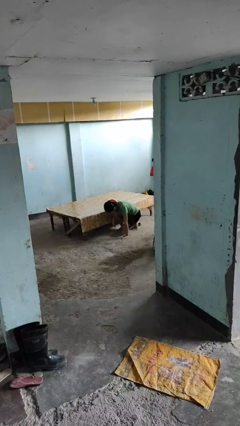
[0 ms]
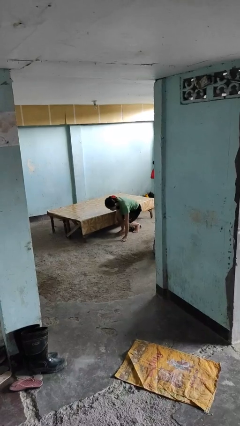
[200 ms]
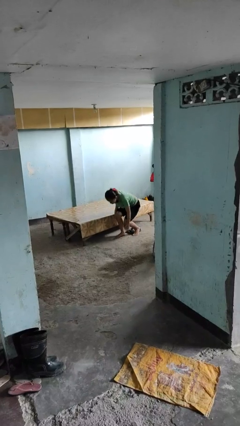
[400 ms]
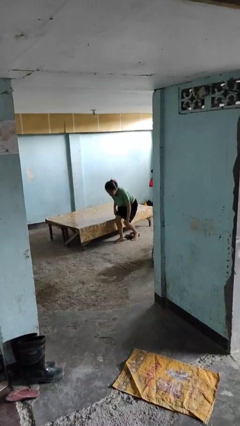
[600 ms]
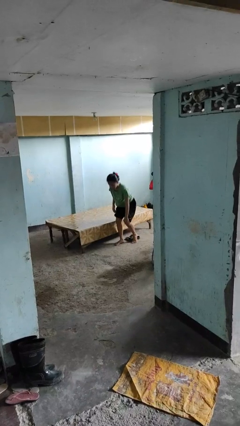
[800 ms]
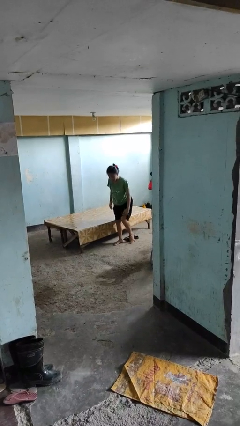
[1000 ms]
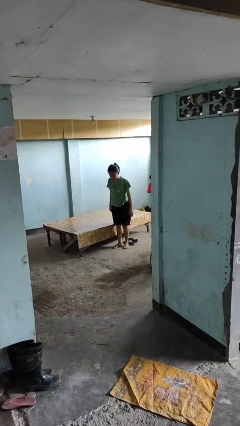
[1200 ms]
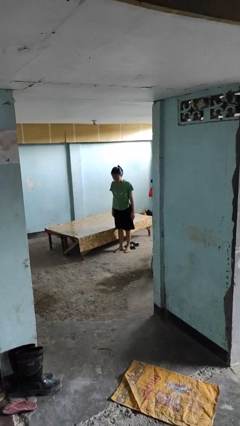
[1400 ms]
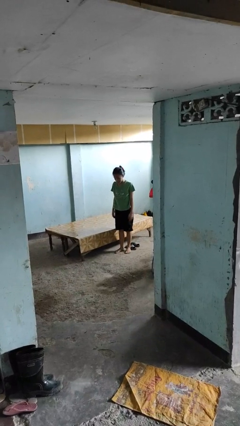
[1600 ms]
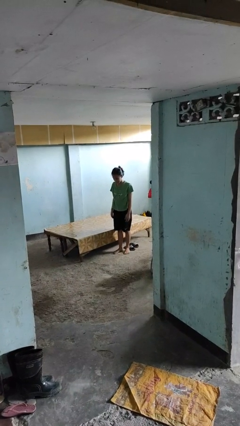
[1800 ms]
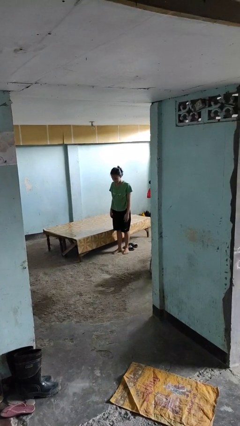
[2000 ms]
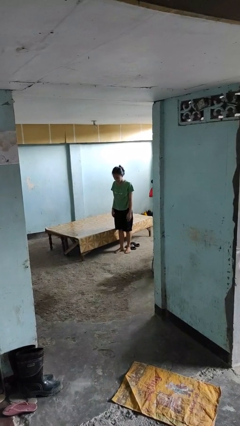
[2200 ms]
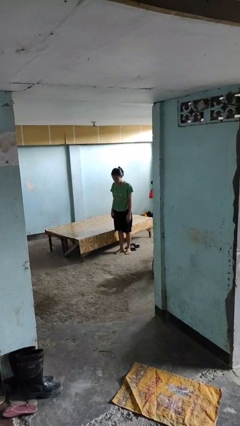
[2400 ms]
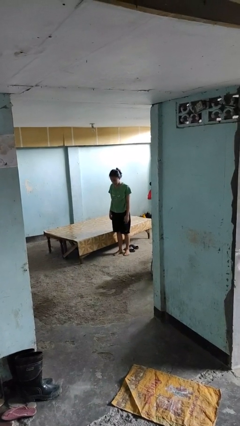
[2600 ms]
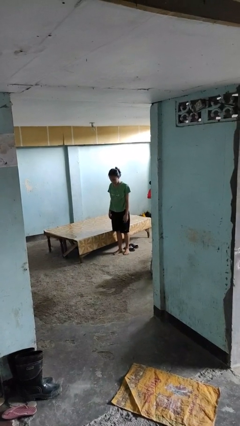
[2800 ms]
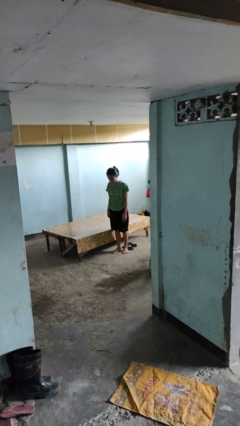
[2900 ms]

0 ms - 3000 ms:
person stands up from floor

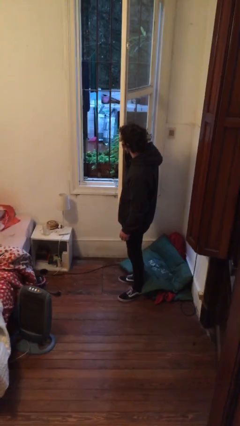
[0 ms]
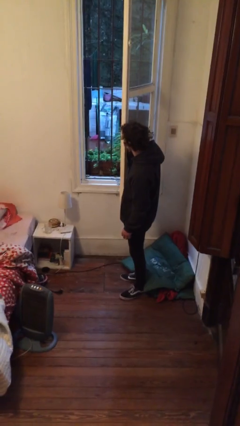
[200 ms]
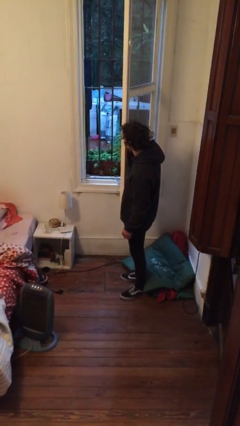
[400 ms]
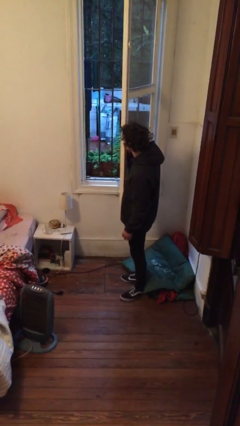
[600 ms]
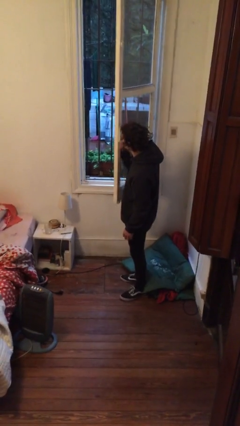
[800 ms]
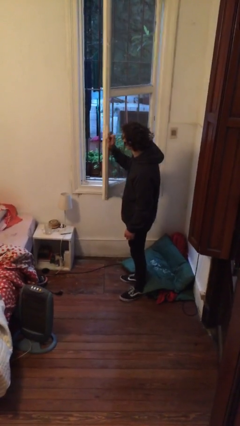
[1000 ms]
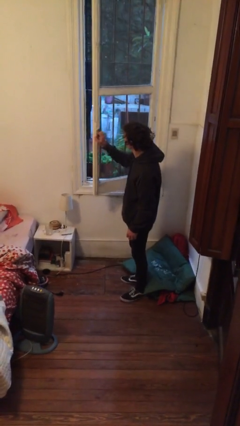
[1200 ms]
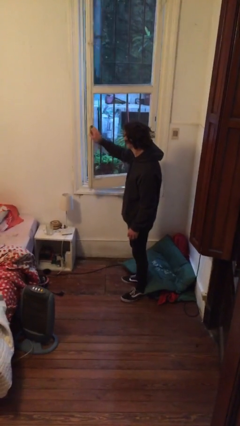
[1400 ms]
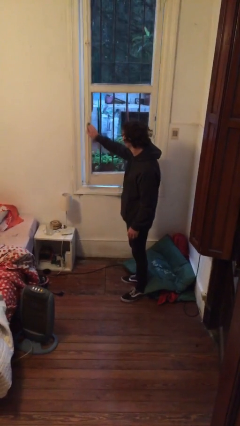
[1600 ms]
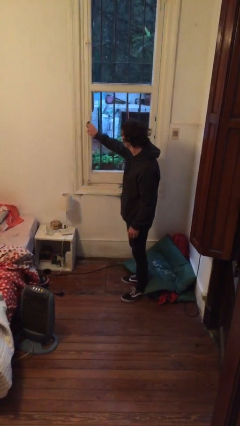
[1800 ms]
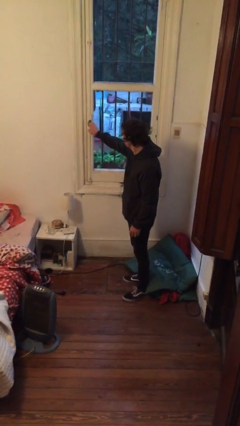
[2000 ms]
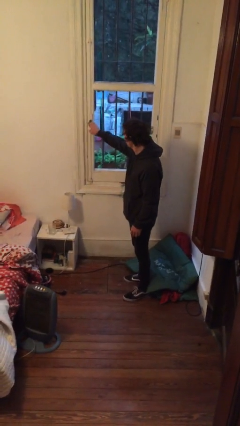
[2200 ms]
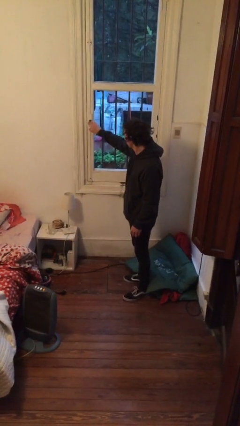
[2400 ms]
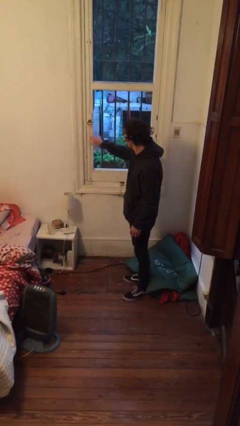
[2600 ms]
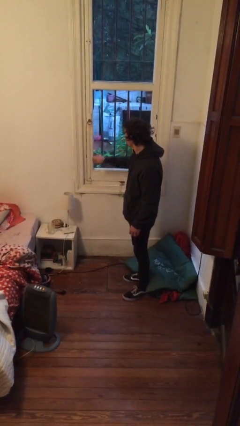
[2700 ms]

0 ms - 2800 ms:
person closes home window

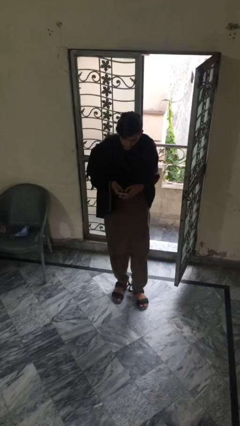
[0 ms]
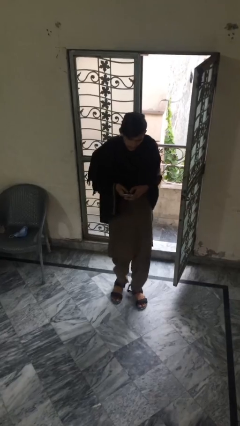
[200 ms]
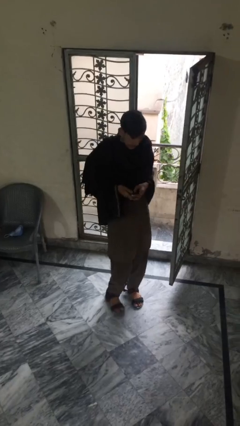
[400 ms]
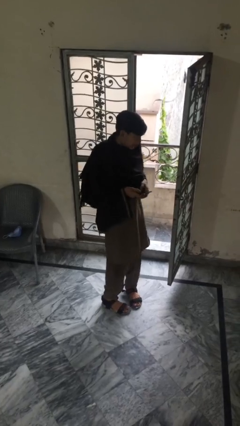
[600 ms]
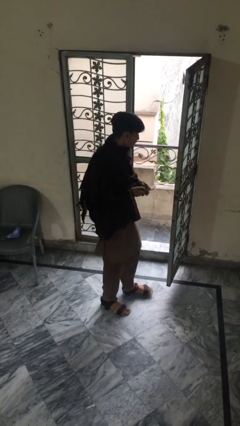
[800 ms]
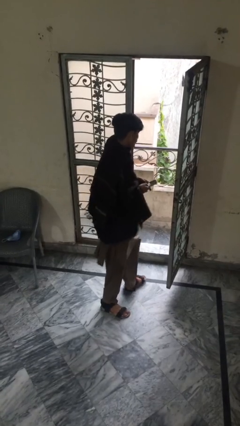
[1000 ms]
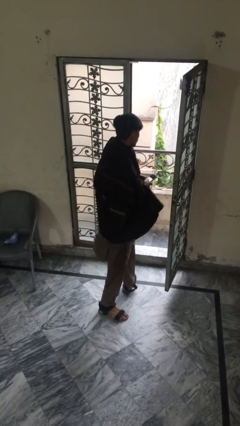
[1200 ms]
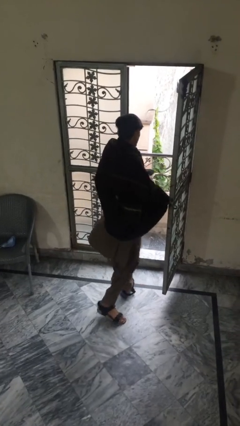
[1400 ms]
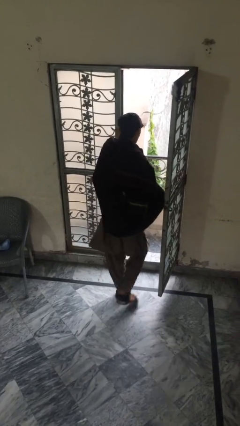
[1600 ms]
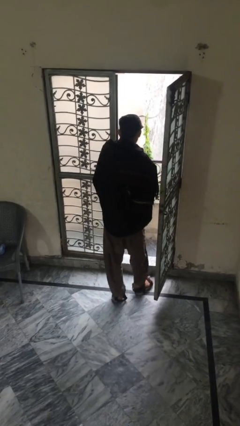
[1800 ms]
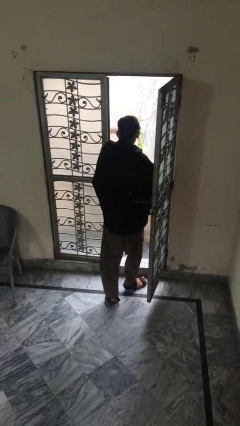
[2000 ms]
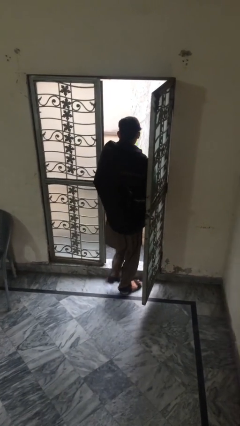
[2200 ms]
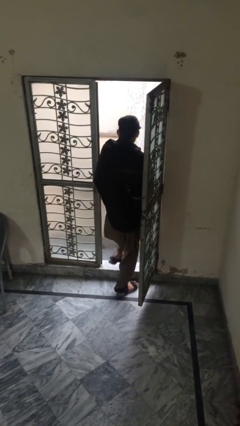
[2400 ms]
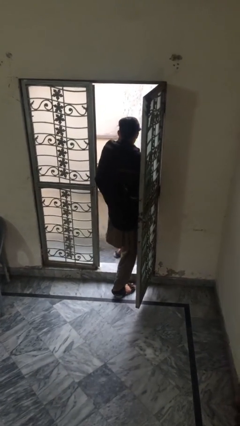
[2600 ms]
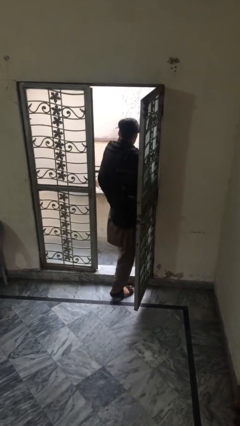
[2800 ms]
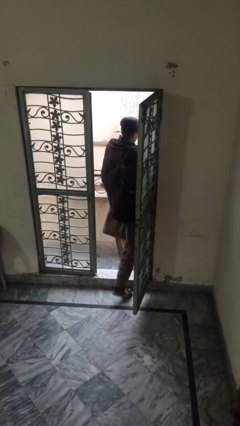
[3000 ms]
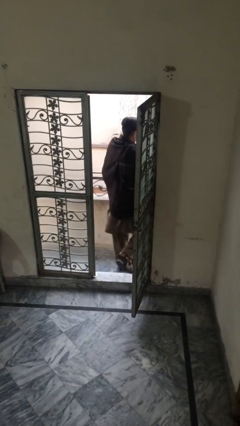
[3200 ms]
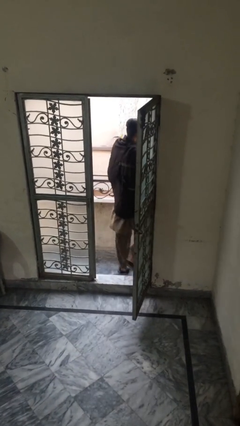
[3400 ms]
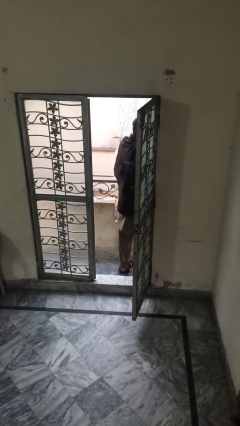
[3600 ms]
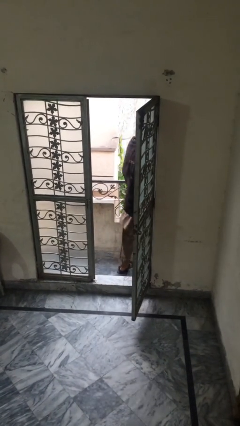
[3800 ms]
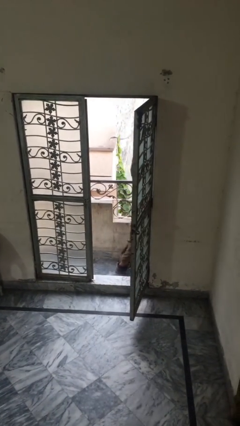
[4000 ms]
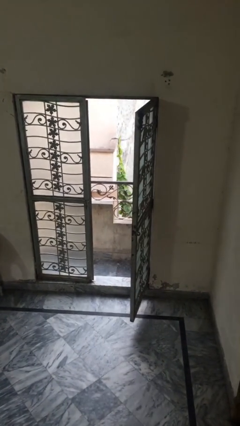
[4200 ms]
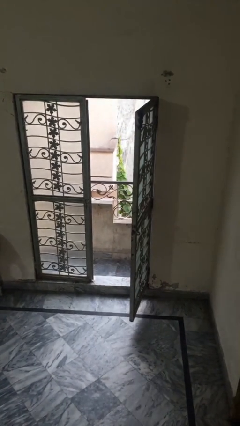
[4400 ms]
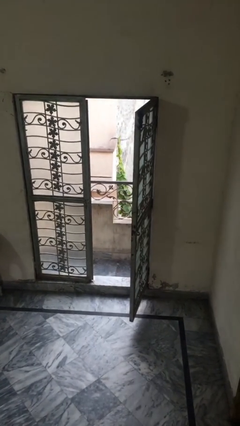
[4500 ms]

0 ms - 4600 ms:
person exits scene through structure

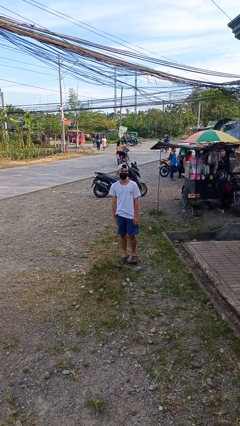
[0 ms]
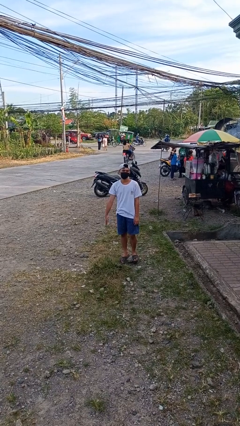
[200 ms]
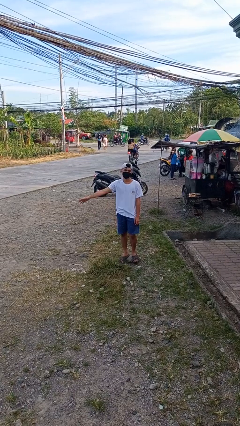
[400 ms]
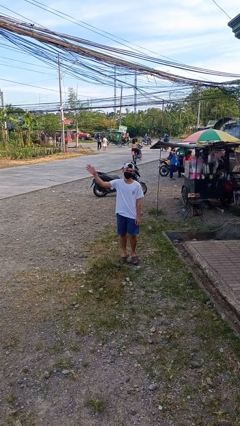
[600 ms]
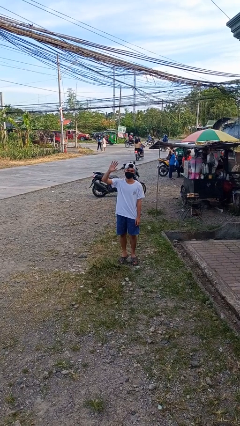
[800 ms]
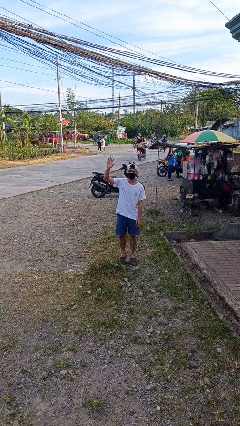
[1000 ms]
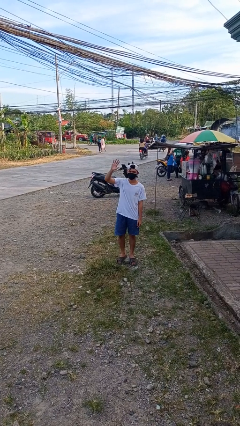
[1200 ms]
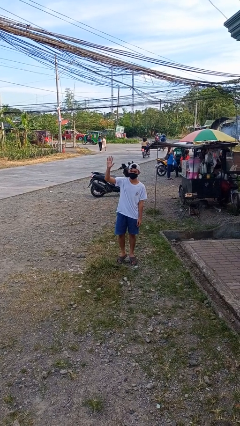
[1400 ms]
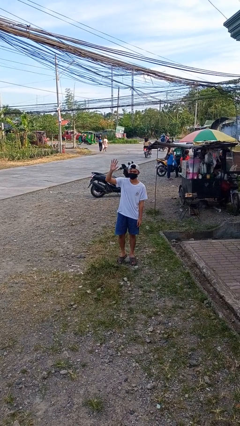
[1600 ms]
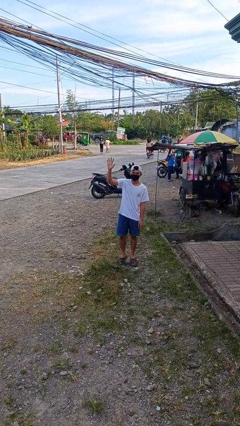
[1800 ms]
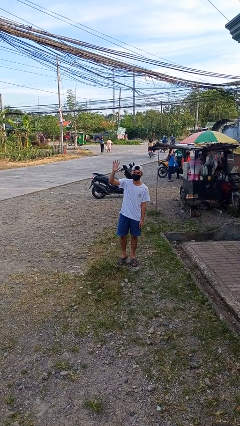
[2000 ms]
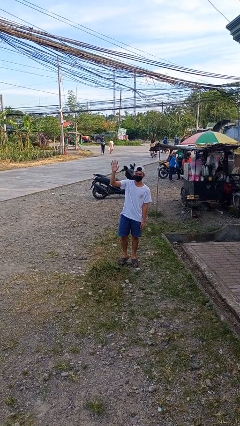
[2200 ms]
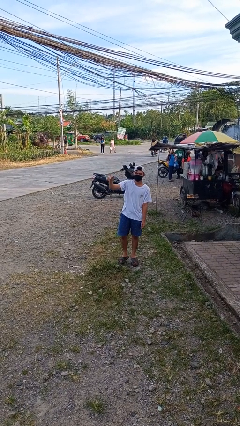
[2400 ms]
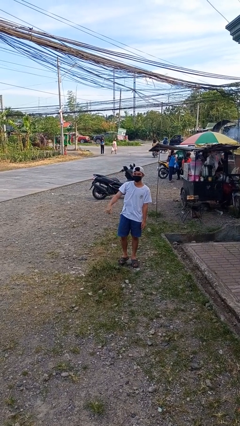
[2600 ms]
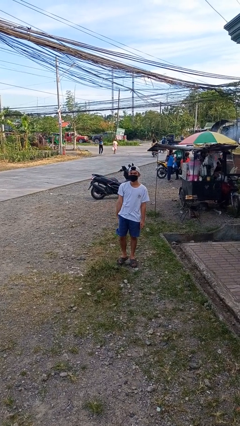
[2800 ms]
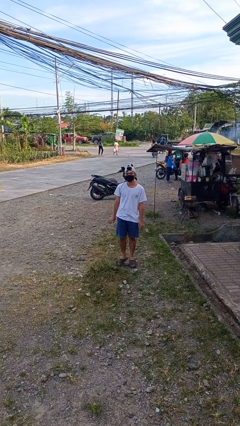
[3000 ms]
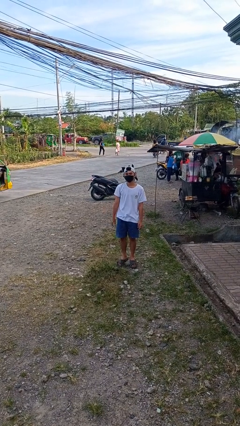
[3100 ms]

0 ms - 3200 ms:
person waves at person

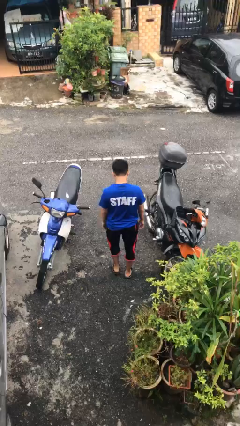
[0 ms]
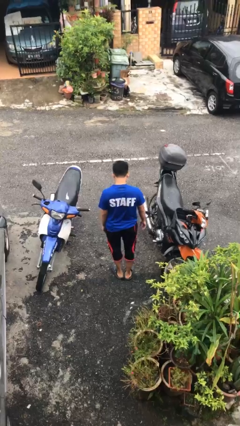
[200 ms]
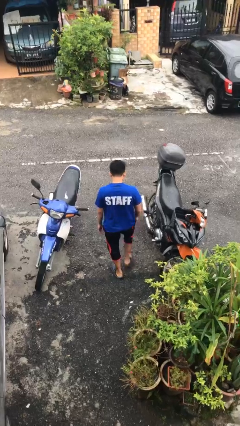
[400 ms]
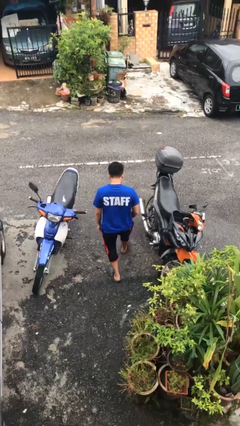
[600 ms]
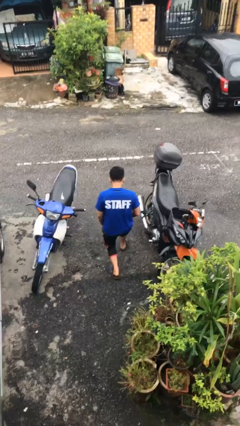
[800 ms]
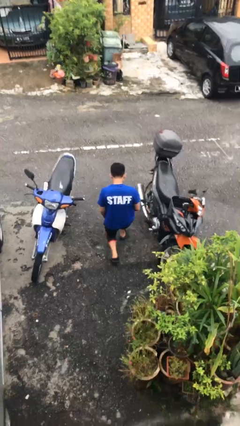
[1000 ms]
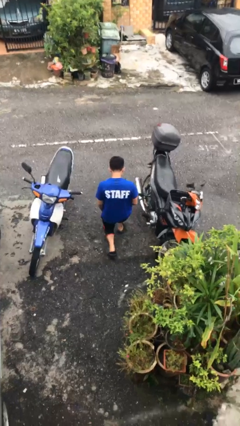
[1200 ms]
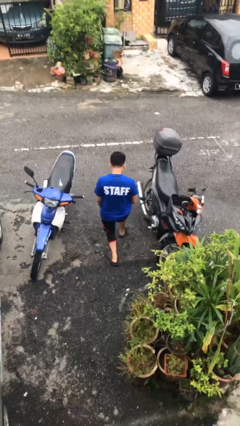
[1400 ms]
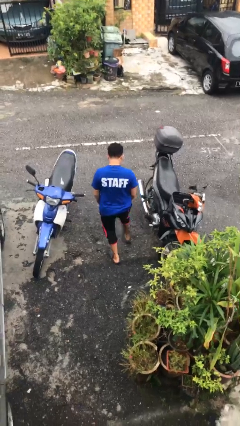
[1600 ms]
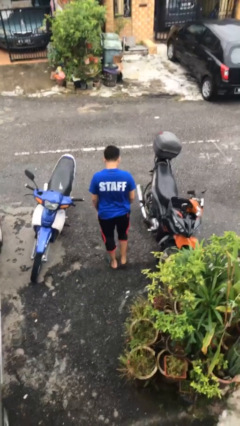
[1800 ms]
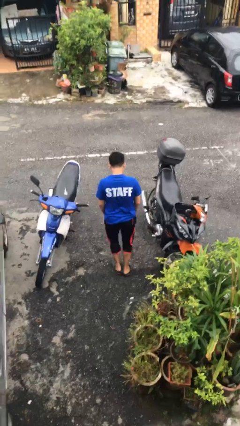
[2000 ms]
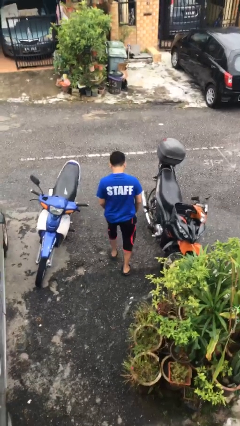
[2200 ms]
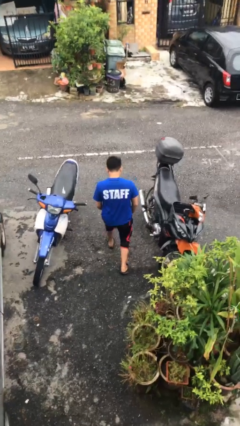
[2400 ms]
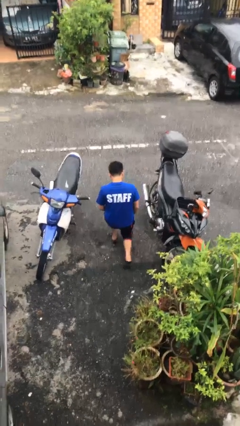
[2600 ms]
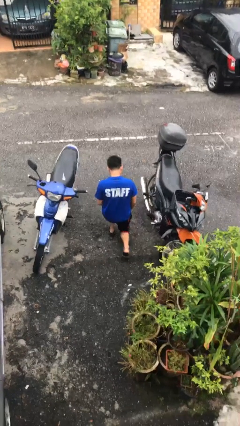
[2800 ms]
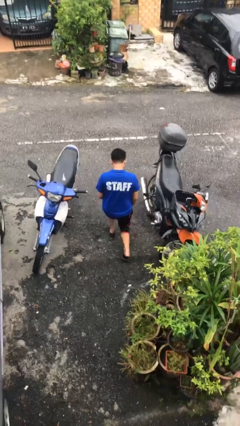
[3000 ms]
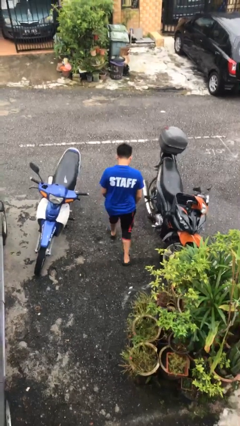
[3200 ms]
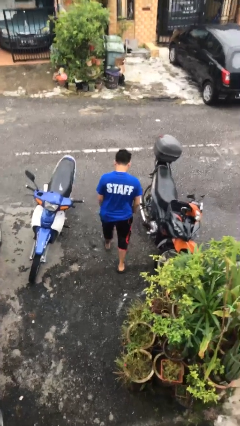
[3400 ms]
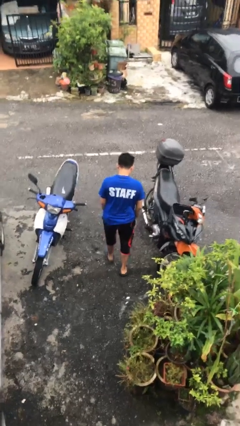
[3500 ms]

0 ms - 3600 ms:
person exercises with lunges

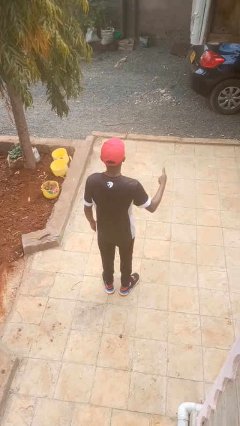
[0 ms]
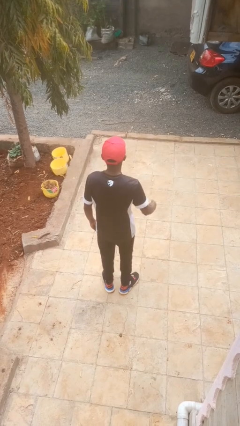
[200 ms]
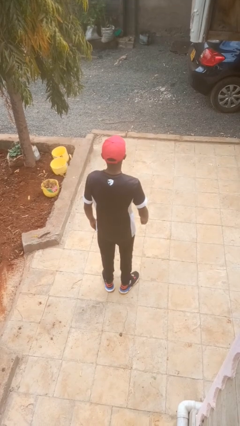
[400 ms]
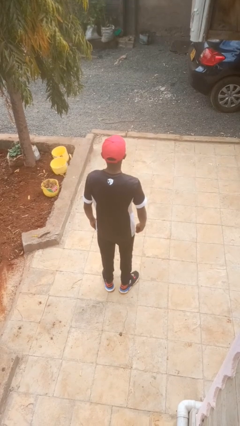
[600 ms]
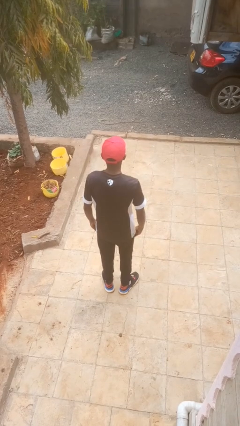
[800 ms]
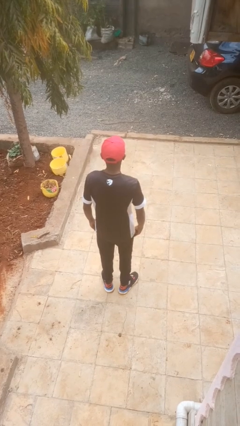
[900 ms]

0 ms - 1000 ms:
person salutes
